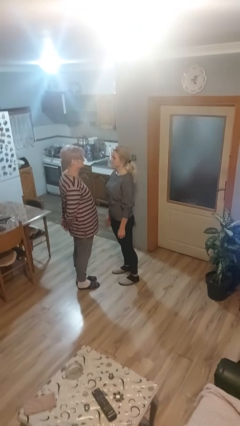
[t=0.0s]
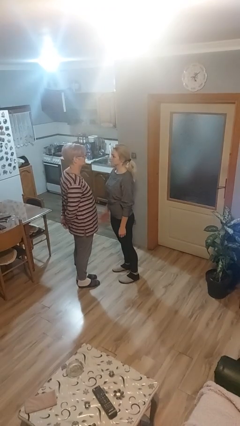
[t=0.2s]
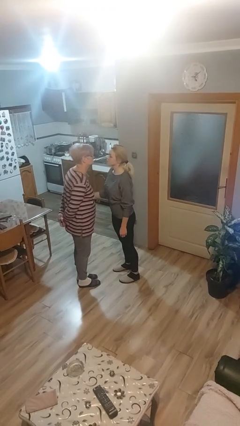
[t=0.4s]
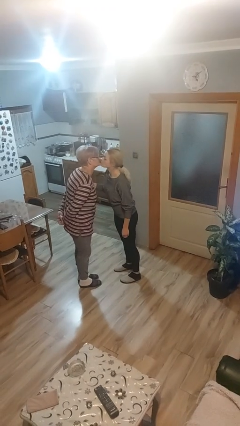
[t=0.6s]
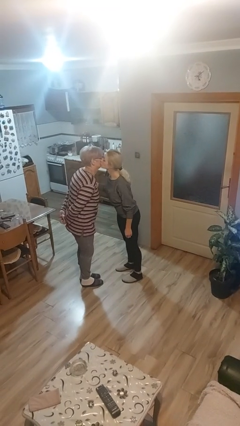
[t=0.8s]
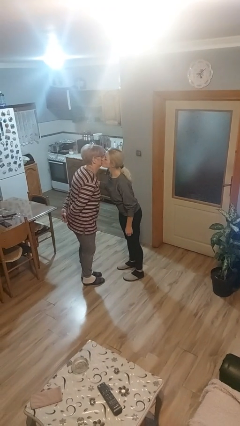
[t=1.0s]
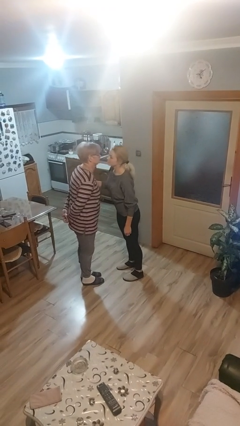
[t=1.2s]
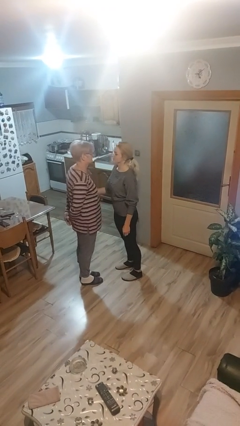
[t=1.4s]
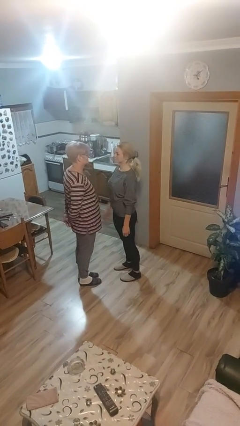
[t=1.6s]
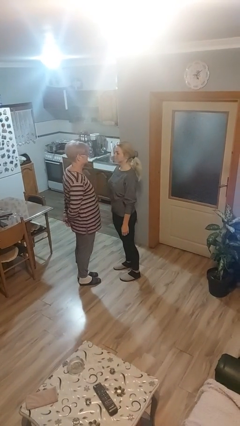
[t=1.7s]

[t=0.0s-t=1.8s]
person kisses cheek of person

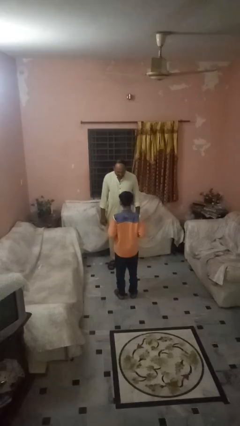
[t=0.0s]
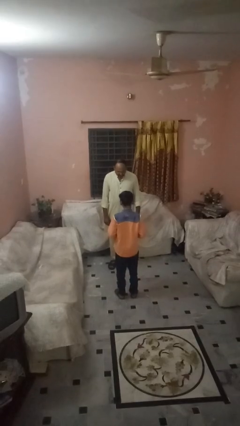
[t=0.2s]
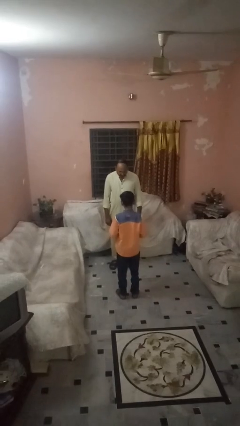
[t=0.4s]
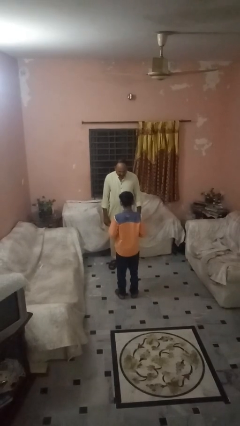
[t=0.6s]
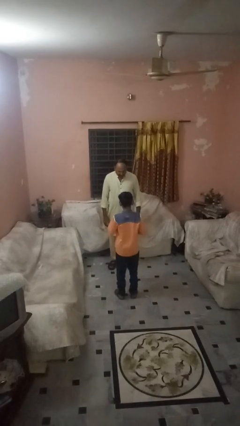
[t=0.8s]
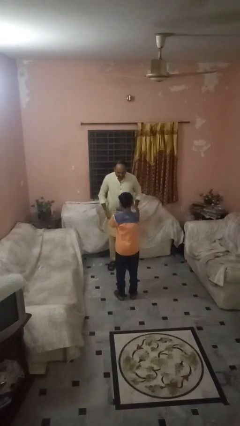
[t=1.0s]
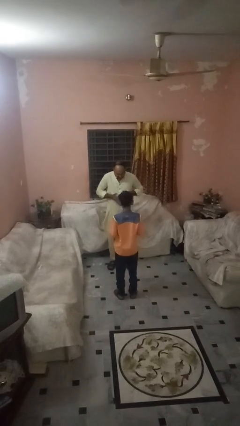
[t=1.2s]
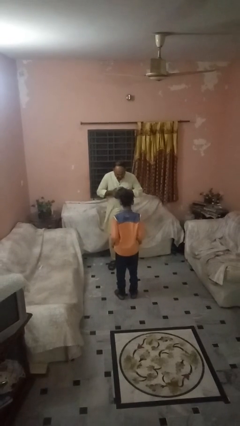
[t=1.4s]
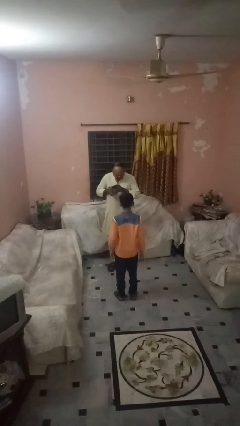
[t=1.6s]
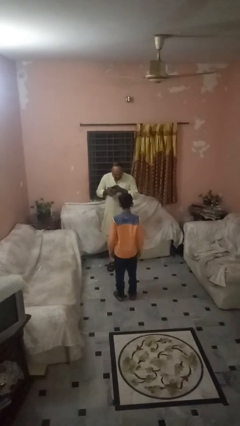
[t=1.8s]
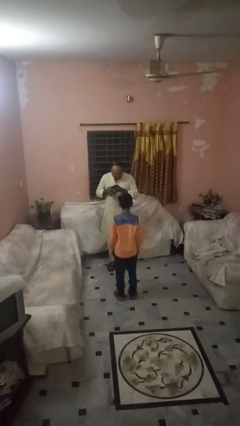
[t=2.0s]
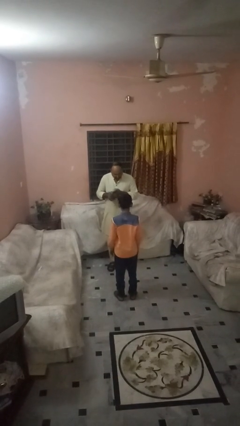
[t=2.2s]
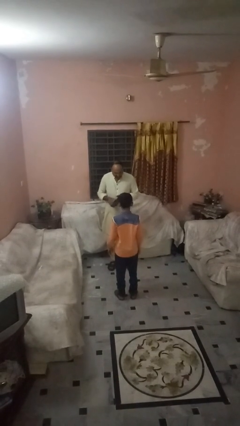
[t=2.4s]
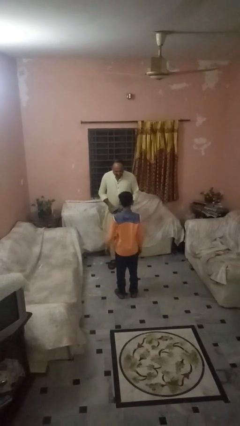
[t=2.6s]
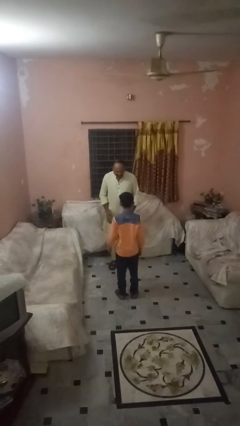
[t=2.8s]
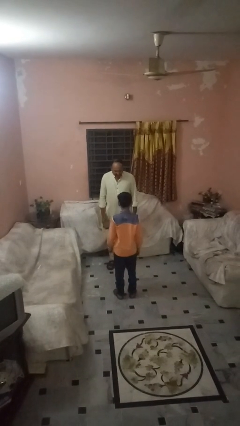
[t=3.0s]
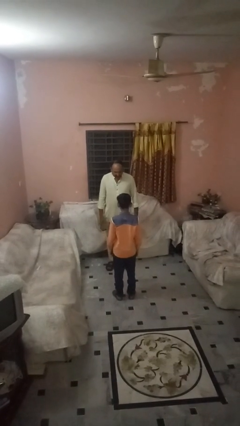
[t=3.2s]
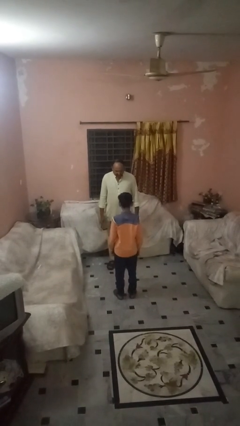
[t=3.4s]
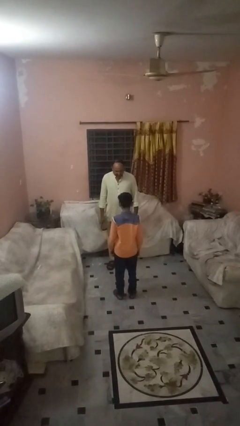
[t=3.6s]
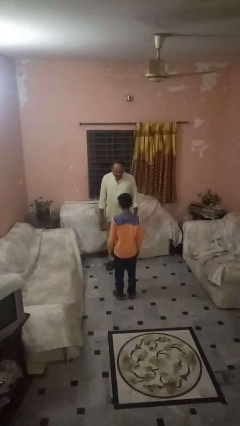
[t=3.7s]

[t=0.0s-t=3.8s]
person catches object from person

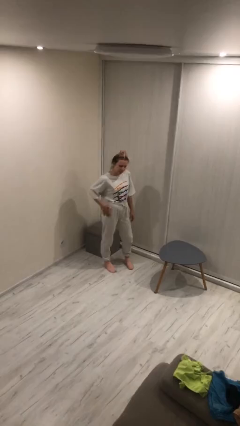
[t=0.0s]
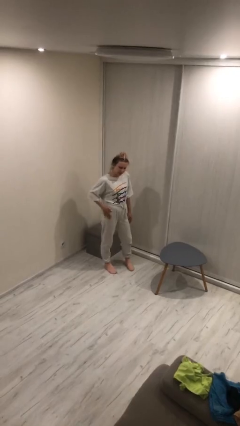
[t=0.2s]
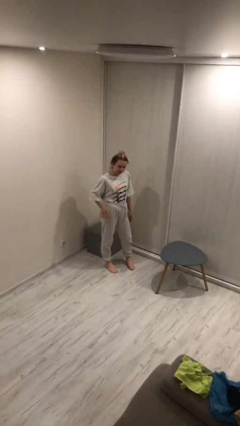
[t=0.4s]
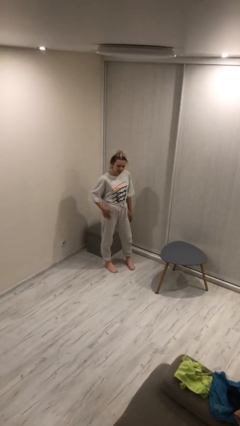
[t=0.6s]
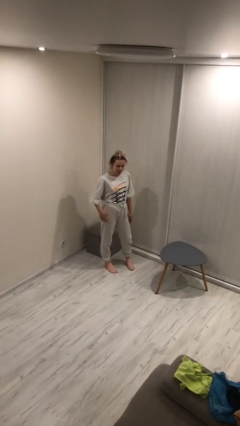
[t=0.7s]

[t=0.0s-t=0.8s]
person slaps hands on thighs

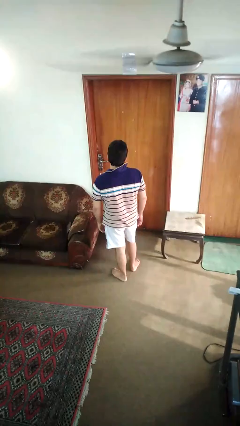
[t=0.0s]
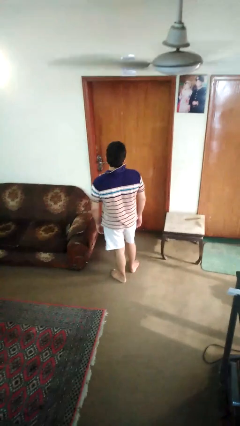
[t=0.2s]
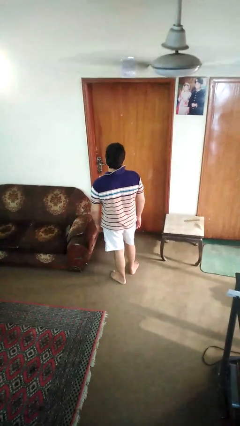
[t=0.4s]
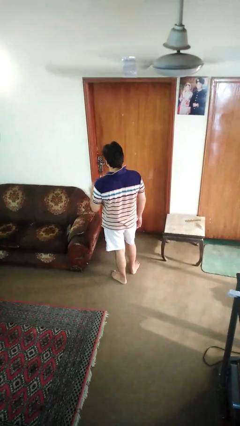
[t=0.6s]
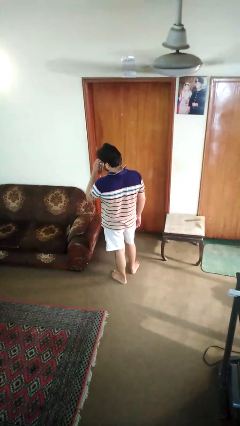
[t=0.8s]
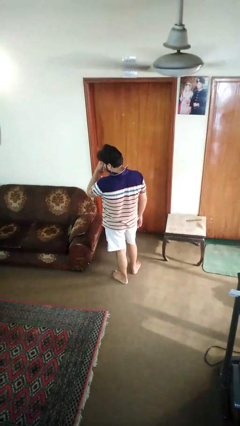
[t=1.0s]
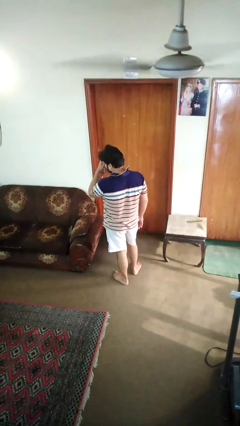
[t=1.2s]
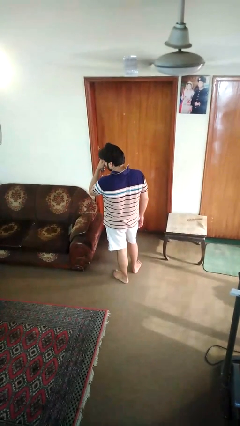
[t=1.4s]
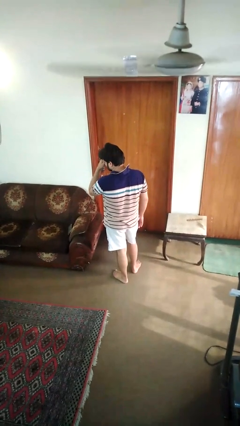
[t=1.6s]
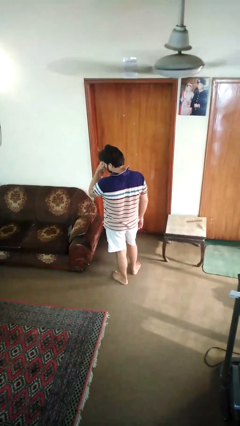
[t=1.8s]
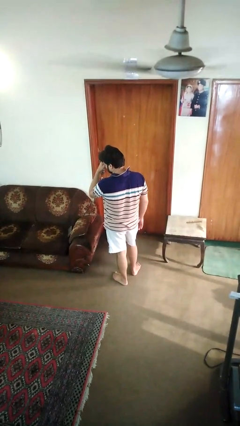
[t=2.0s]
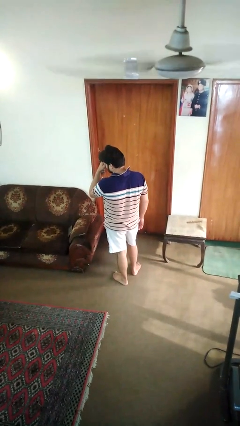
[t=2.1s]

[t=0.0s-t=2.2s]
person rubs eyes

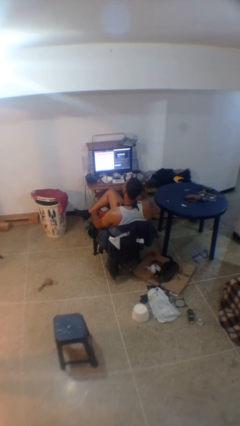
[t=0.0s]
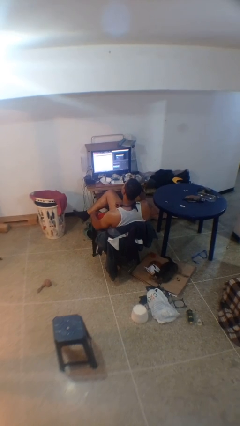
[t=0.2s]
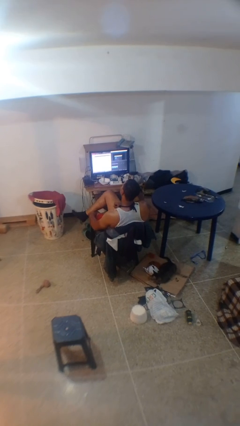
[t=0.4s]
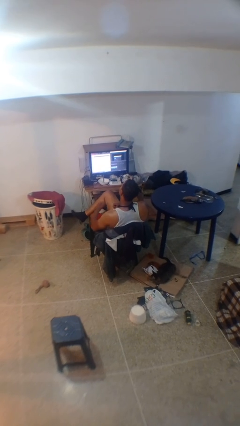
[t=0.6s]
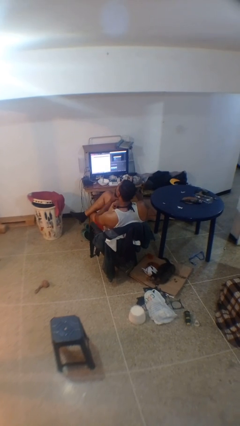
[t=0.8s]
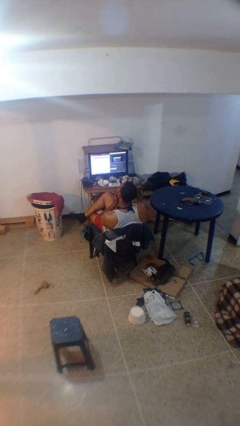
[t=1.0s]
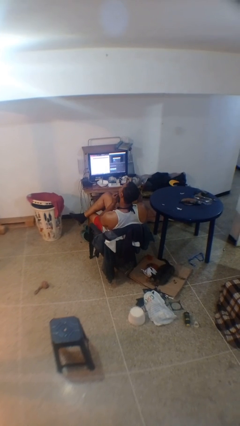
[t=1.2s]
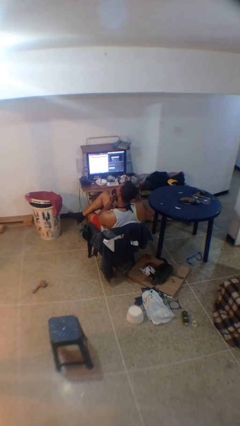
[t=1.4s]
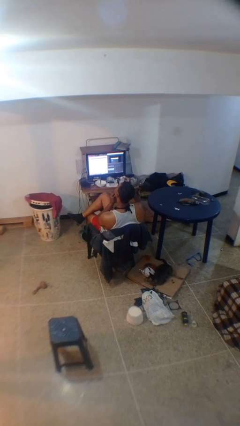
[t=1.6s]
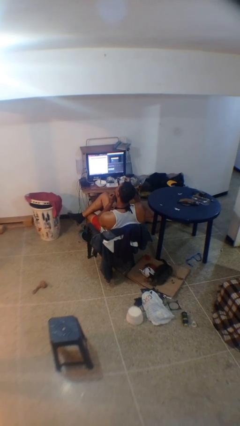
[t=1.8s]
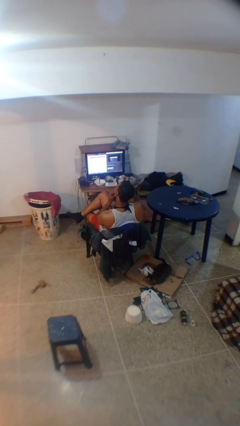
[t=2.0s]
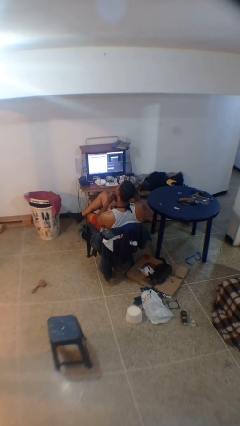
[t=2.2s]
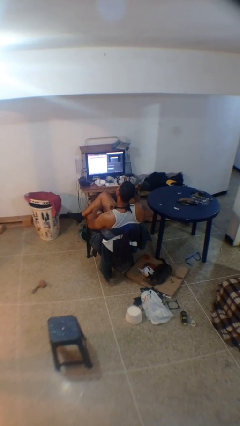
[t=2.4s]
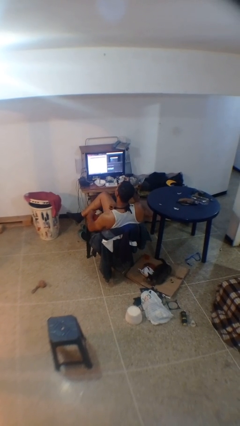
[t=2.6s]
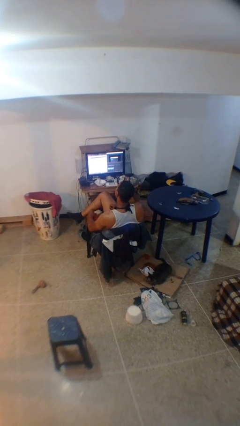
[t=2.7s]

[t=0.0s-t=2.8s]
person strokes chin

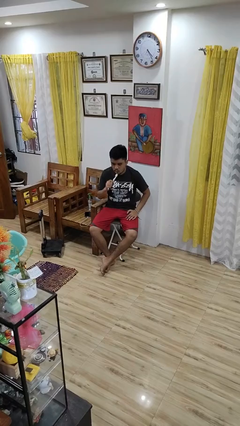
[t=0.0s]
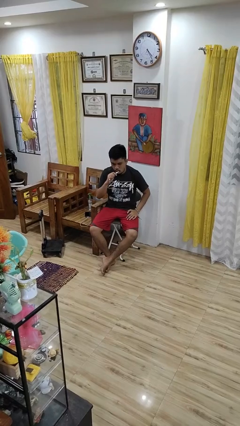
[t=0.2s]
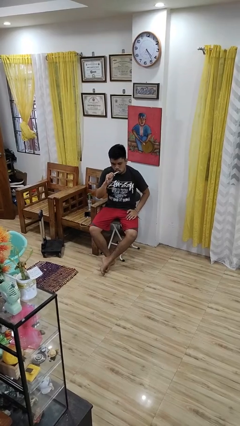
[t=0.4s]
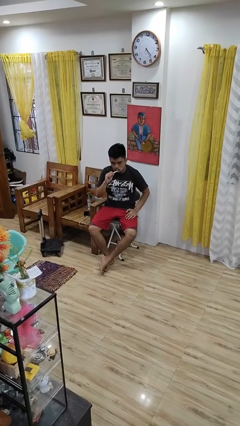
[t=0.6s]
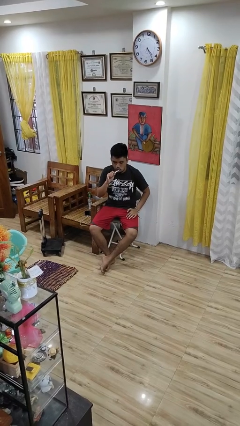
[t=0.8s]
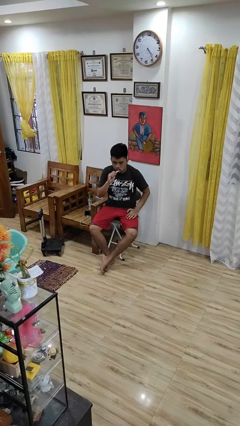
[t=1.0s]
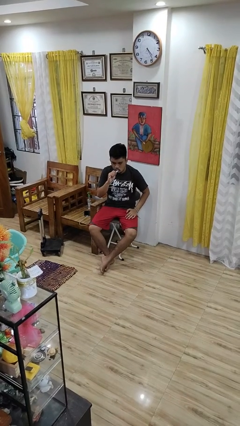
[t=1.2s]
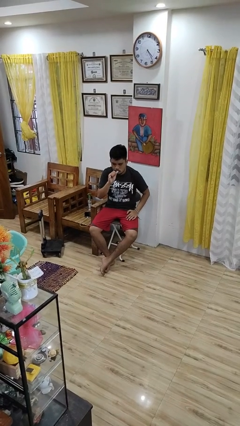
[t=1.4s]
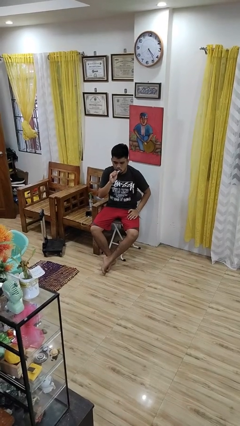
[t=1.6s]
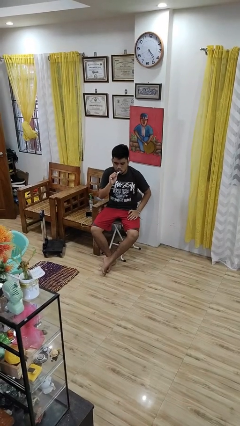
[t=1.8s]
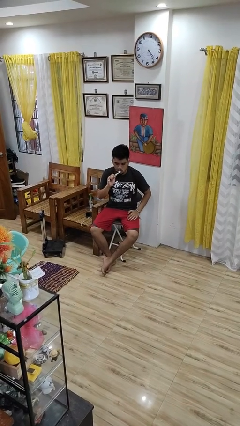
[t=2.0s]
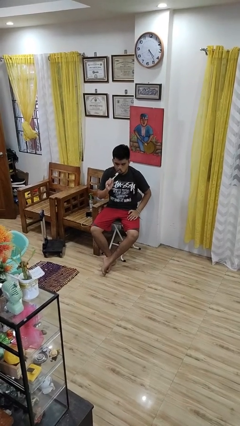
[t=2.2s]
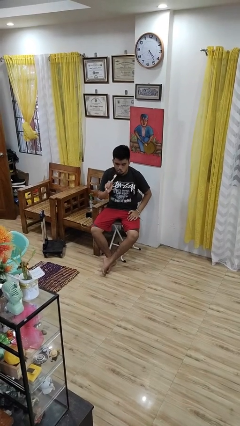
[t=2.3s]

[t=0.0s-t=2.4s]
person brushes teeth

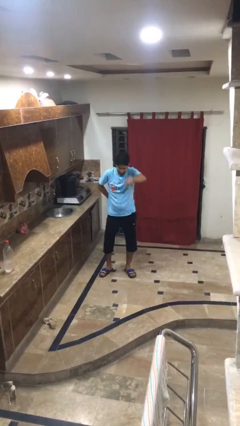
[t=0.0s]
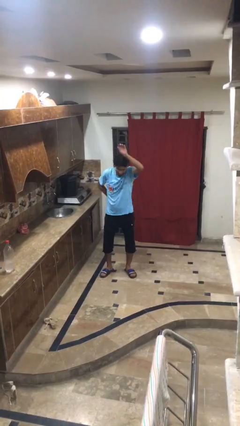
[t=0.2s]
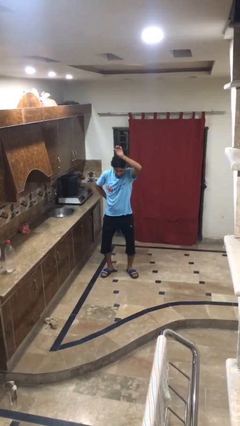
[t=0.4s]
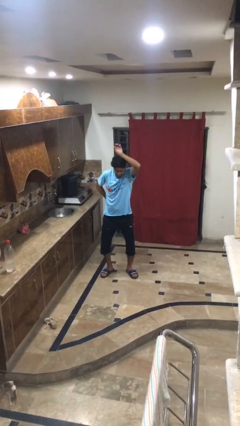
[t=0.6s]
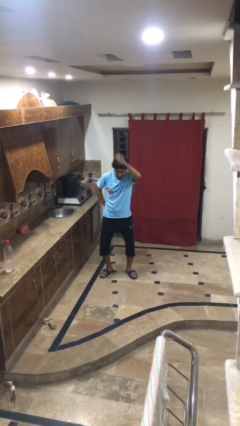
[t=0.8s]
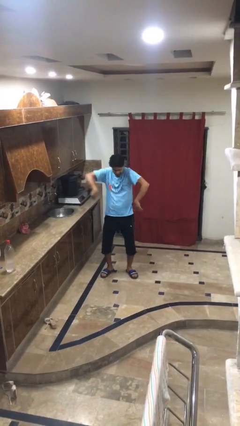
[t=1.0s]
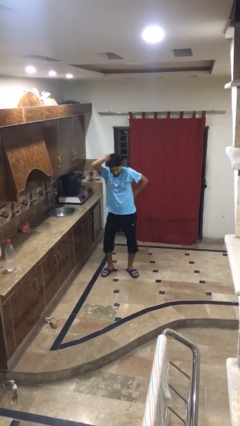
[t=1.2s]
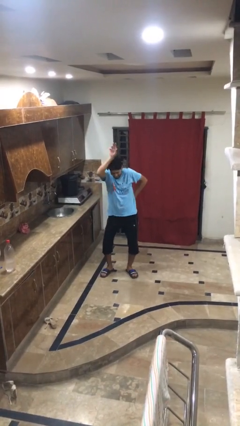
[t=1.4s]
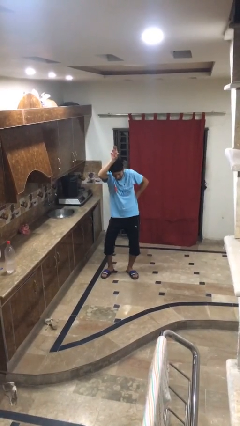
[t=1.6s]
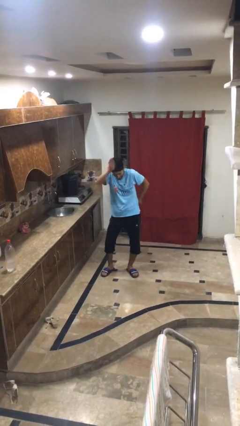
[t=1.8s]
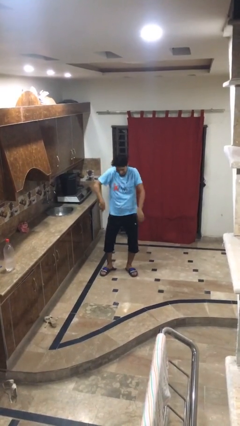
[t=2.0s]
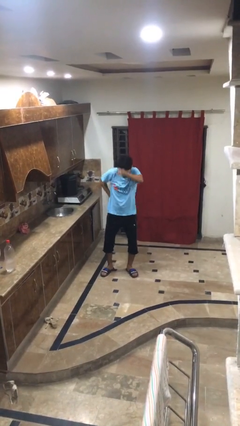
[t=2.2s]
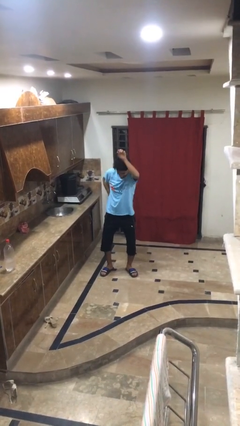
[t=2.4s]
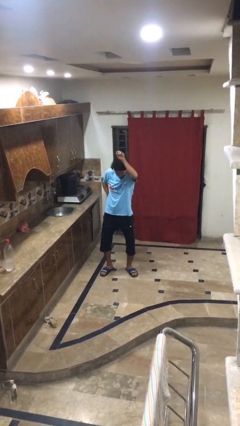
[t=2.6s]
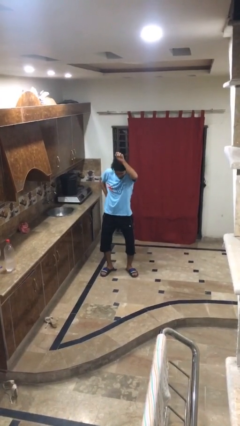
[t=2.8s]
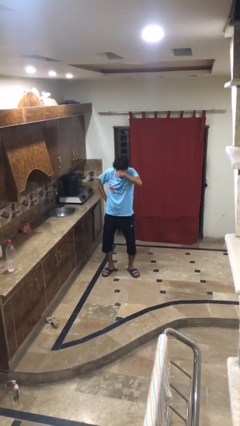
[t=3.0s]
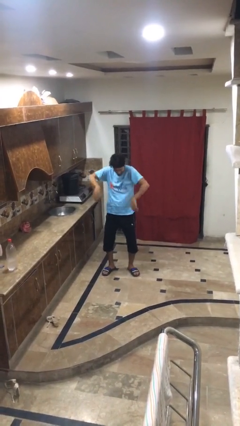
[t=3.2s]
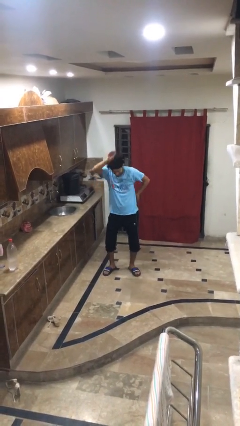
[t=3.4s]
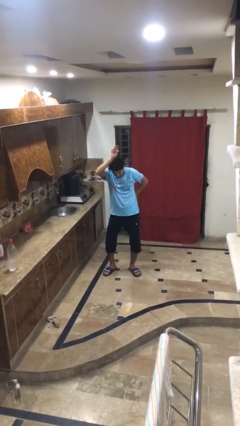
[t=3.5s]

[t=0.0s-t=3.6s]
person dances in place
